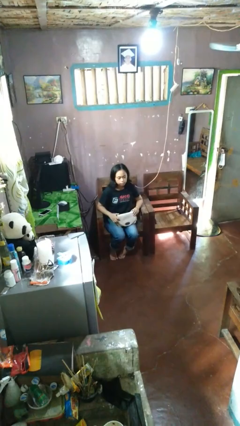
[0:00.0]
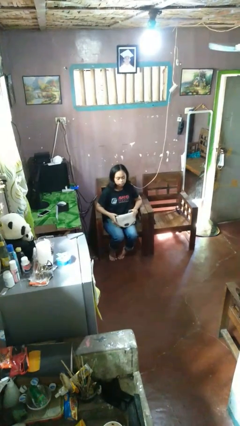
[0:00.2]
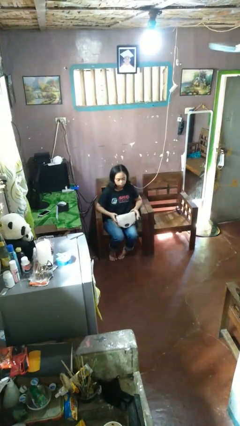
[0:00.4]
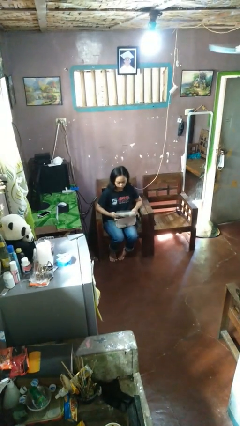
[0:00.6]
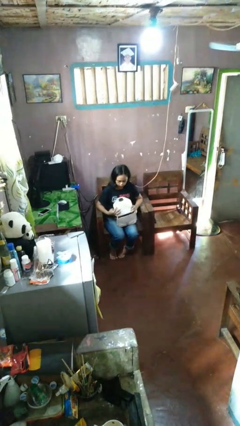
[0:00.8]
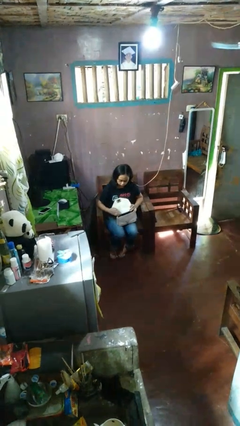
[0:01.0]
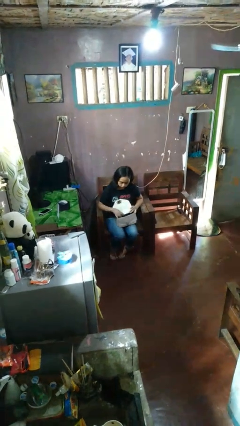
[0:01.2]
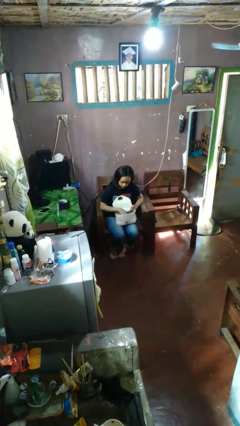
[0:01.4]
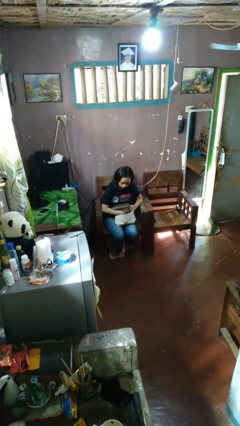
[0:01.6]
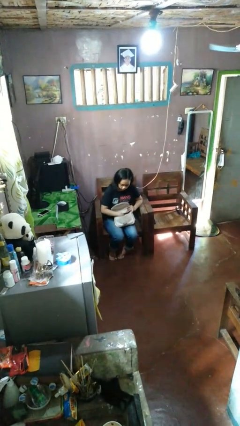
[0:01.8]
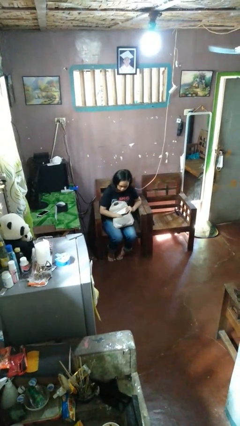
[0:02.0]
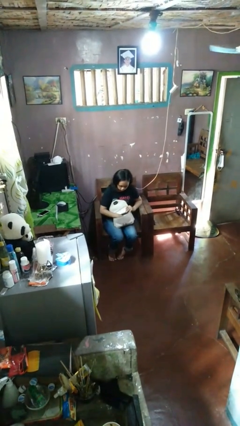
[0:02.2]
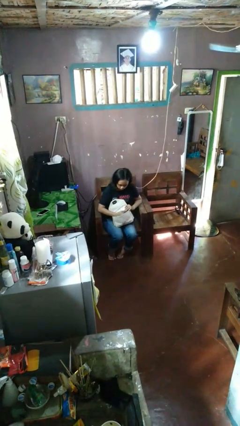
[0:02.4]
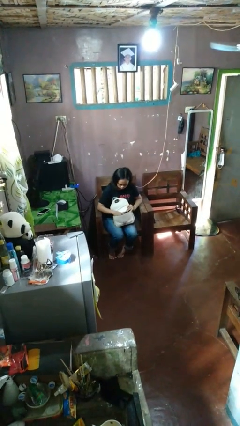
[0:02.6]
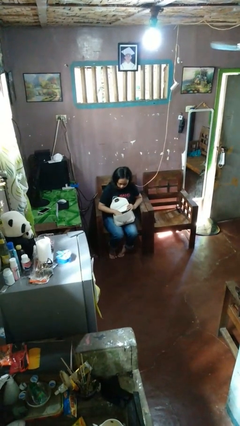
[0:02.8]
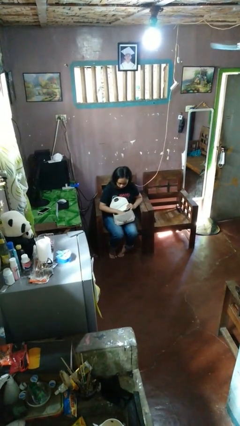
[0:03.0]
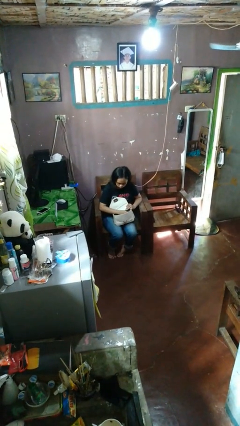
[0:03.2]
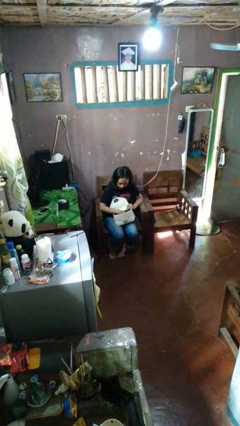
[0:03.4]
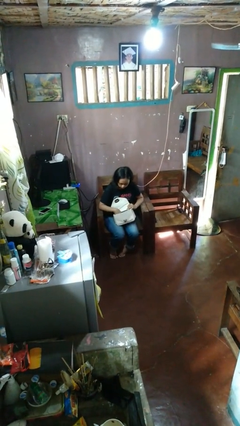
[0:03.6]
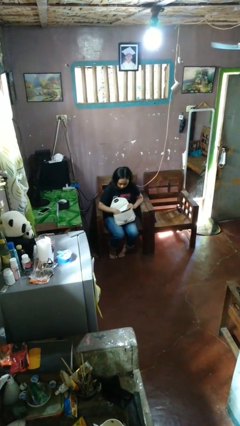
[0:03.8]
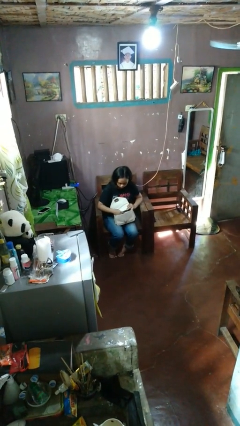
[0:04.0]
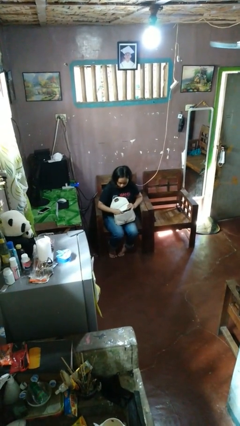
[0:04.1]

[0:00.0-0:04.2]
person searches in purse

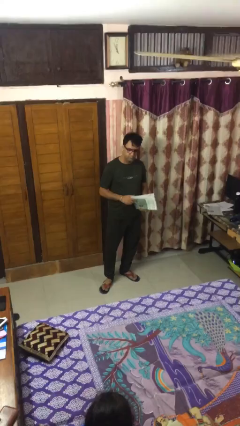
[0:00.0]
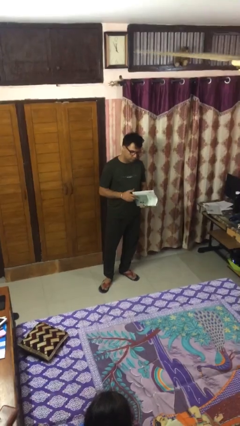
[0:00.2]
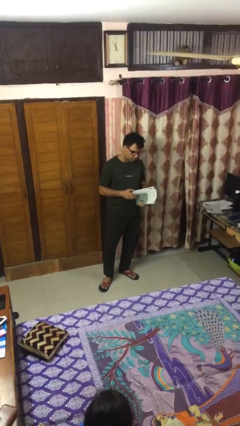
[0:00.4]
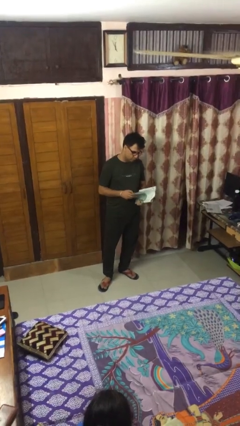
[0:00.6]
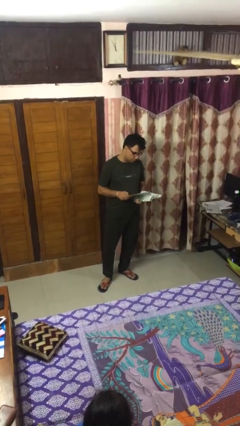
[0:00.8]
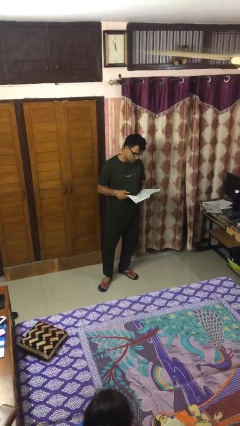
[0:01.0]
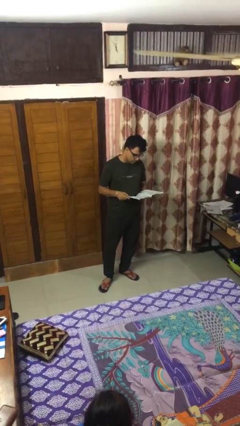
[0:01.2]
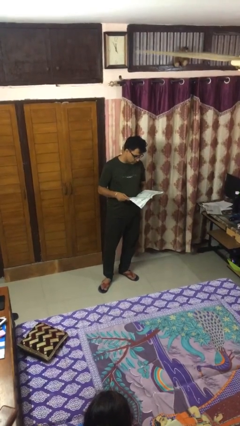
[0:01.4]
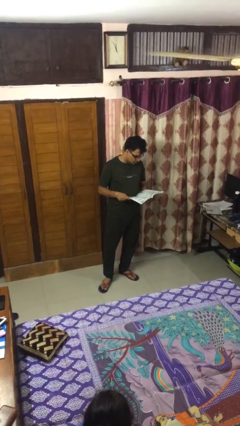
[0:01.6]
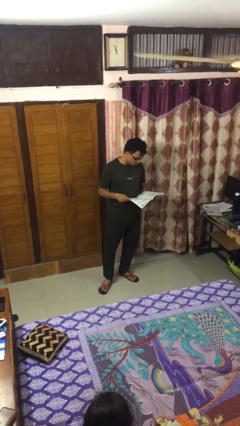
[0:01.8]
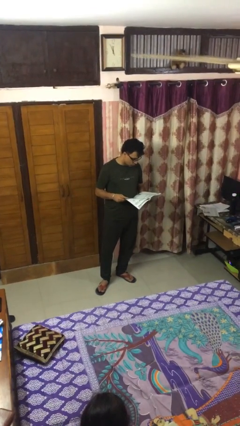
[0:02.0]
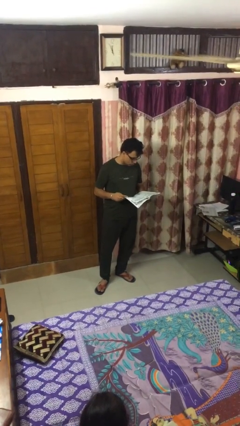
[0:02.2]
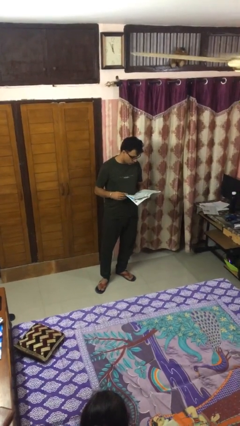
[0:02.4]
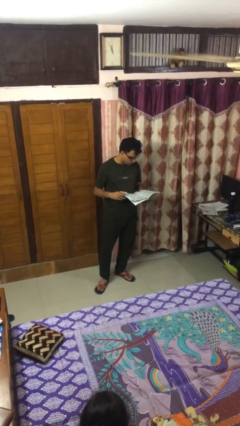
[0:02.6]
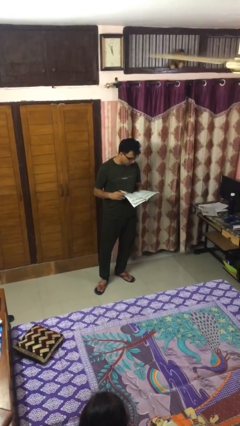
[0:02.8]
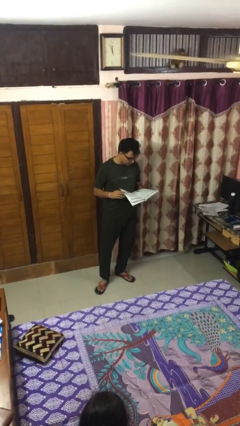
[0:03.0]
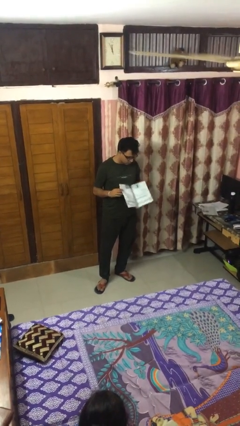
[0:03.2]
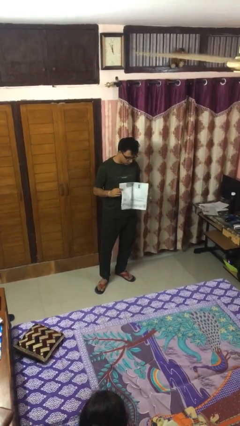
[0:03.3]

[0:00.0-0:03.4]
person reads newspaper

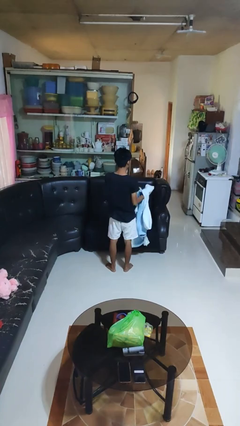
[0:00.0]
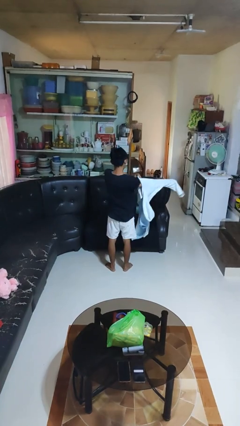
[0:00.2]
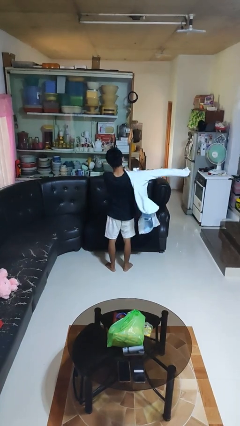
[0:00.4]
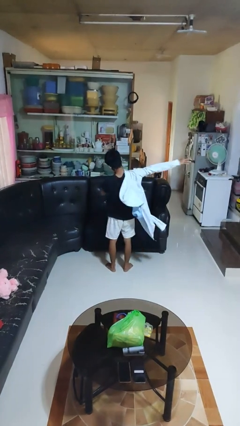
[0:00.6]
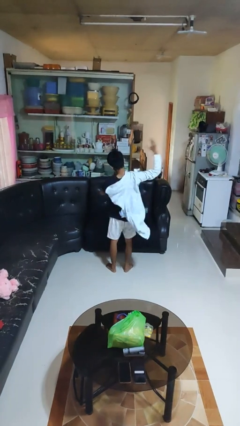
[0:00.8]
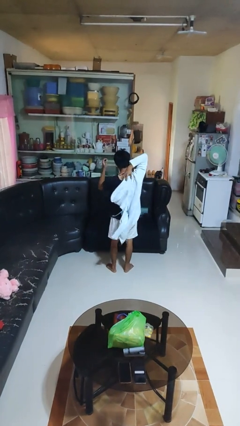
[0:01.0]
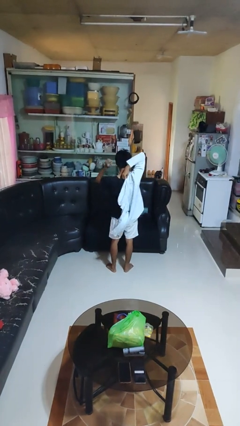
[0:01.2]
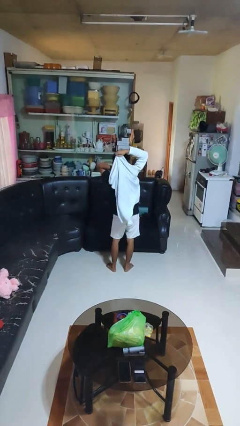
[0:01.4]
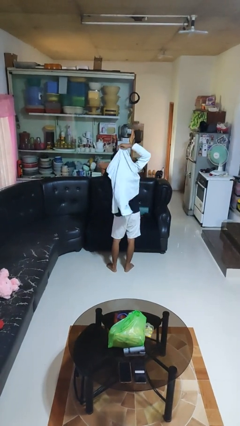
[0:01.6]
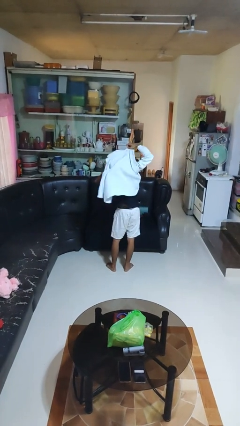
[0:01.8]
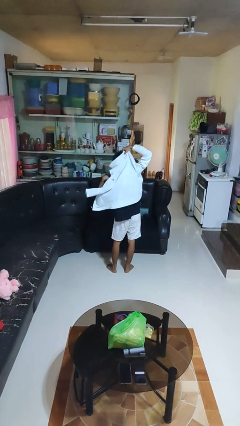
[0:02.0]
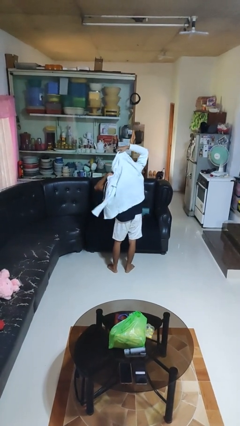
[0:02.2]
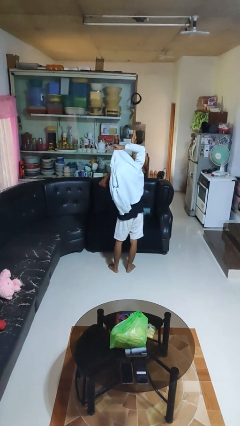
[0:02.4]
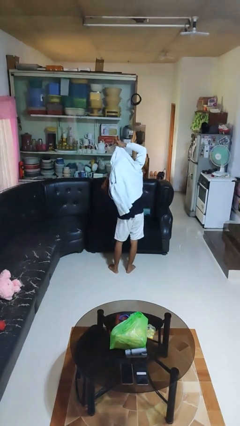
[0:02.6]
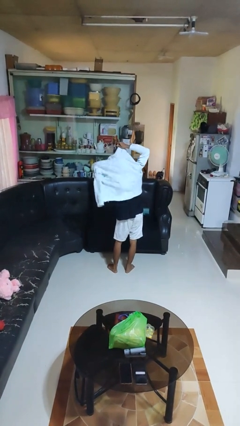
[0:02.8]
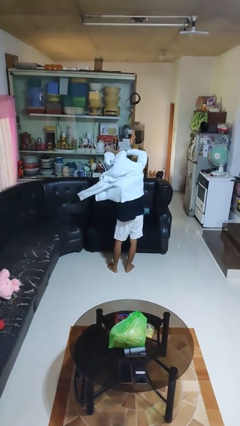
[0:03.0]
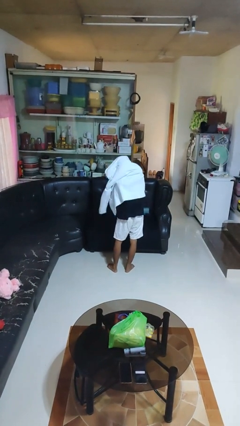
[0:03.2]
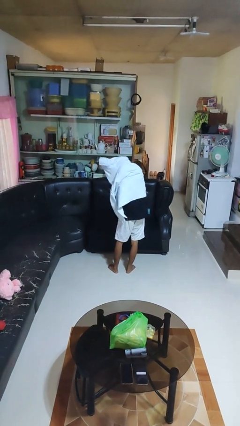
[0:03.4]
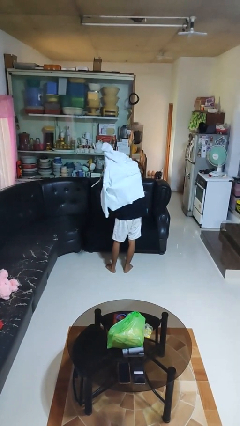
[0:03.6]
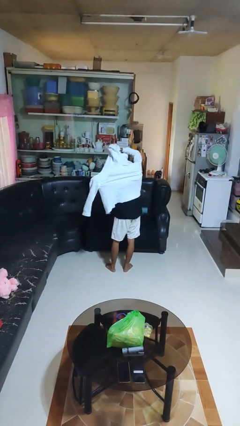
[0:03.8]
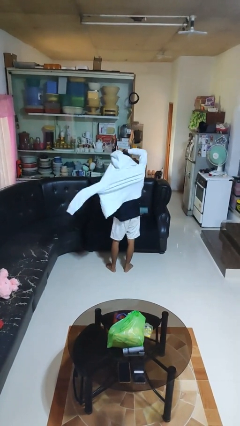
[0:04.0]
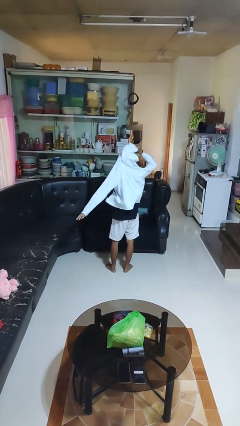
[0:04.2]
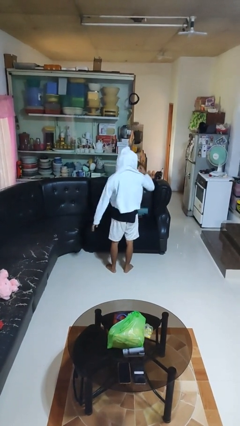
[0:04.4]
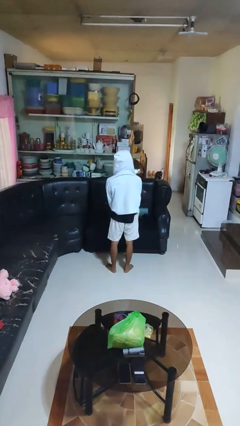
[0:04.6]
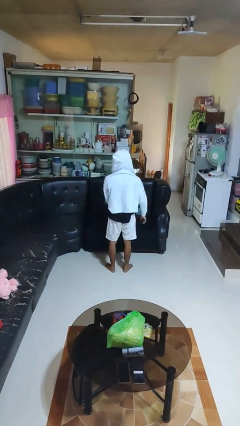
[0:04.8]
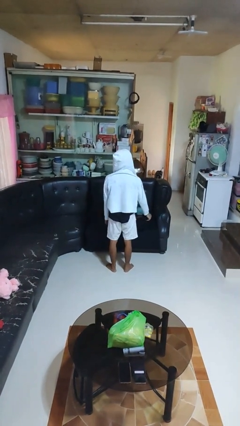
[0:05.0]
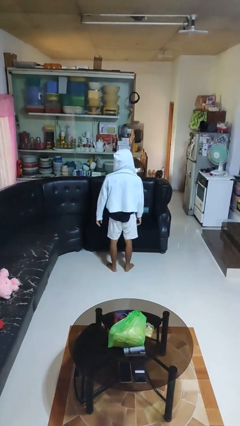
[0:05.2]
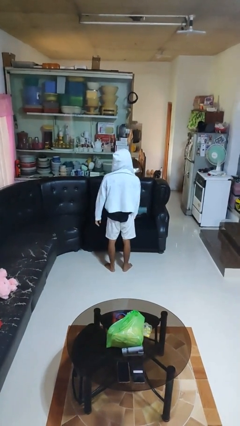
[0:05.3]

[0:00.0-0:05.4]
person puts on hoodie

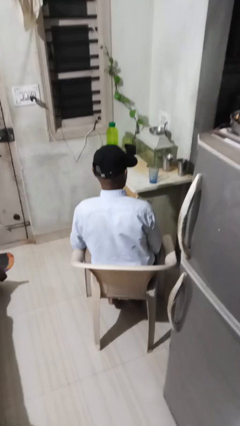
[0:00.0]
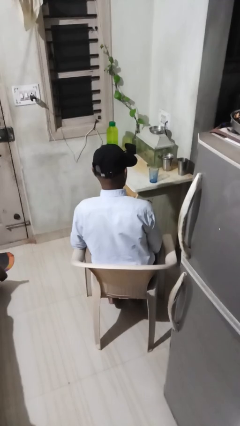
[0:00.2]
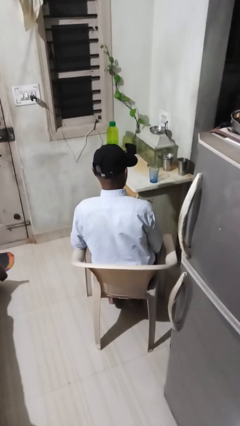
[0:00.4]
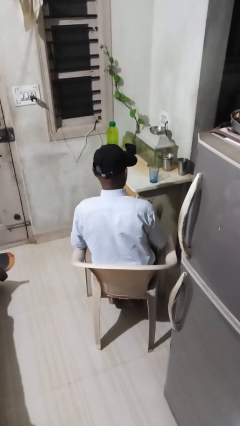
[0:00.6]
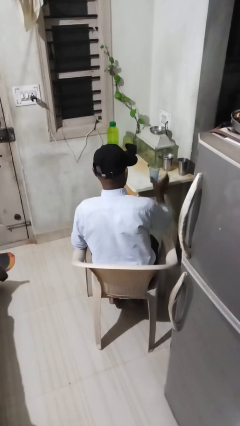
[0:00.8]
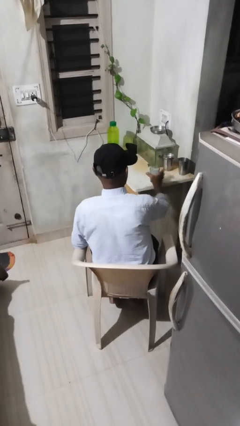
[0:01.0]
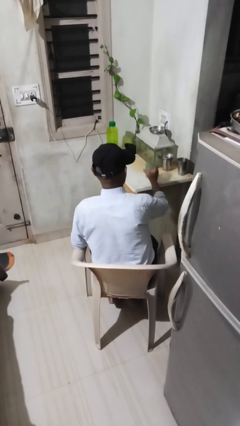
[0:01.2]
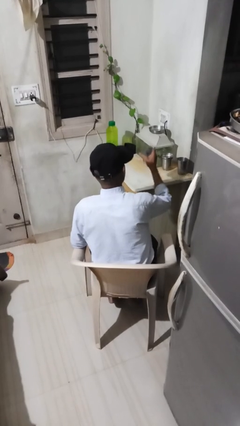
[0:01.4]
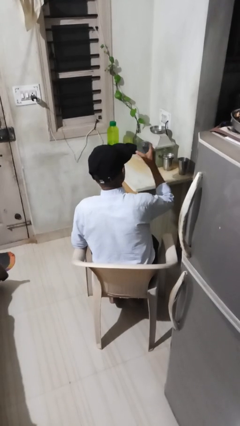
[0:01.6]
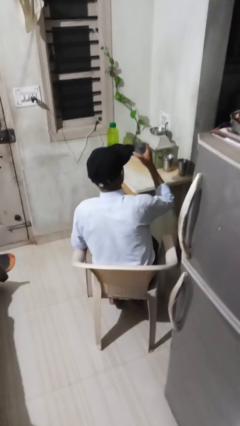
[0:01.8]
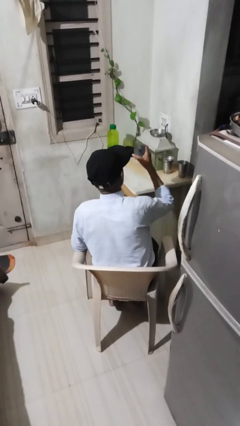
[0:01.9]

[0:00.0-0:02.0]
person picks up object from table

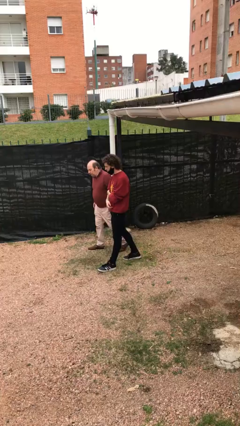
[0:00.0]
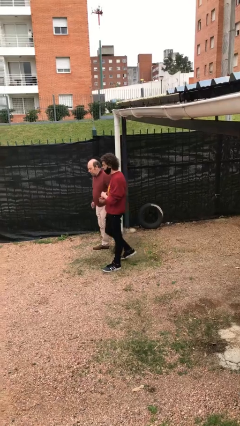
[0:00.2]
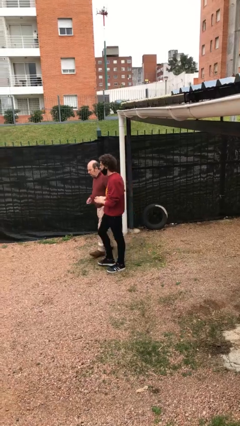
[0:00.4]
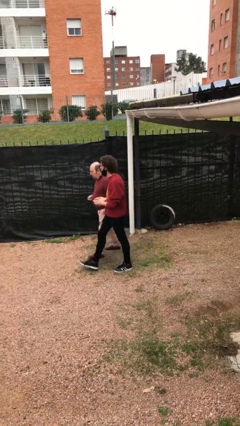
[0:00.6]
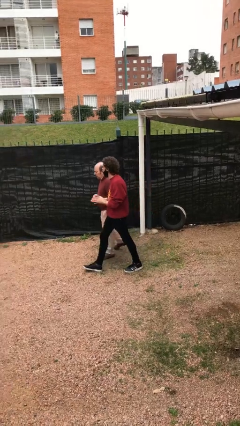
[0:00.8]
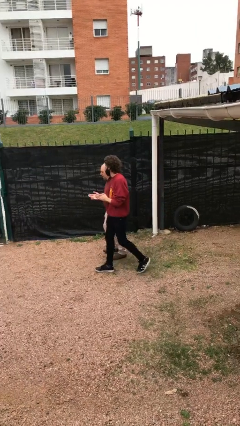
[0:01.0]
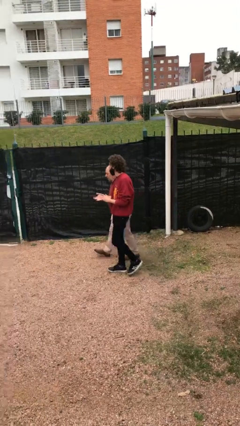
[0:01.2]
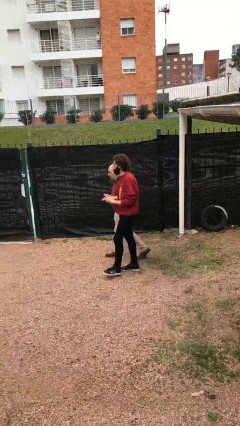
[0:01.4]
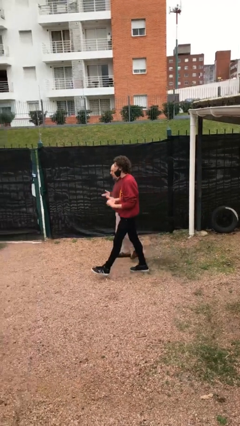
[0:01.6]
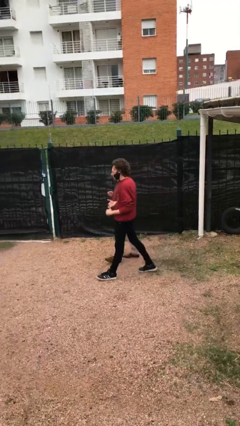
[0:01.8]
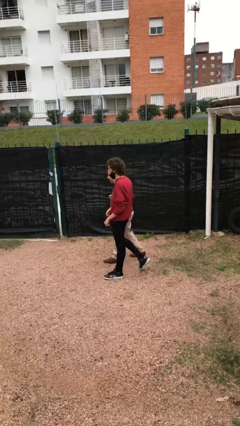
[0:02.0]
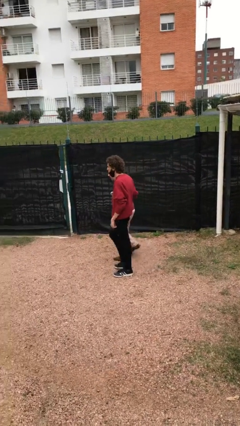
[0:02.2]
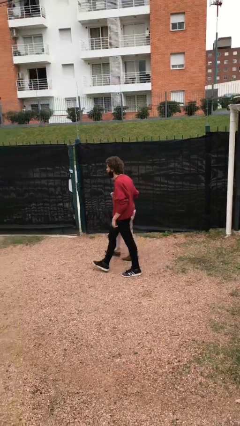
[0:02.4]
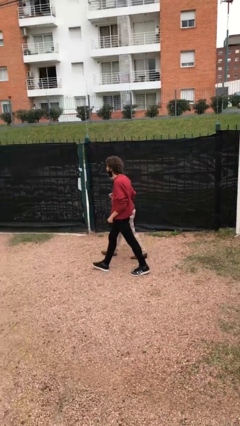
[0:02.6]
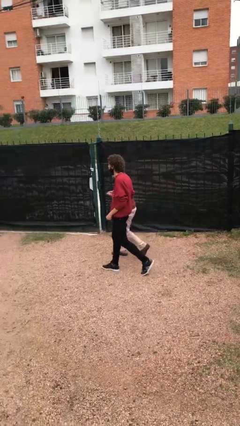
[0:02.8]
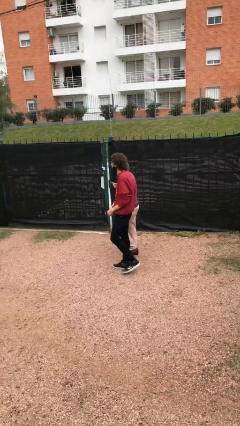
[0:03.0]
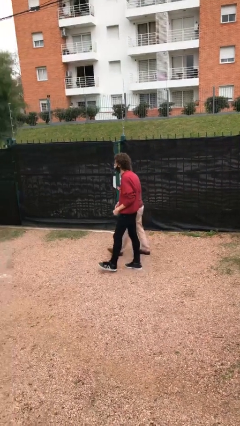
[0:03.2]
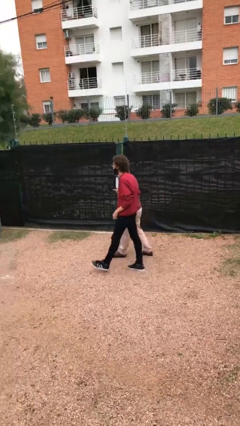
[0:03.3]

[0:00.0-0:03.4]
person talks to person
